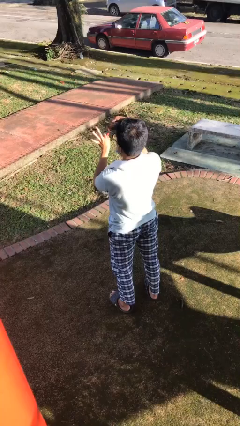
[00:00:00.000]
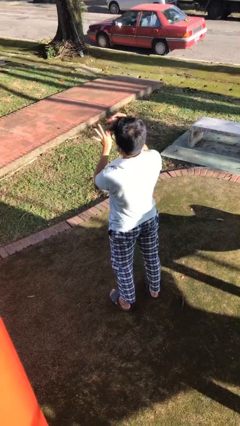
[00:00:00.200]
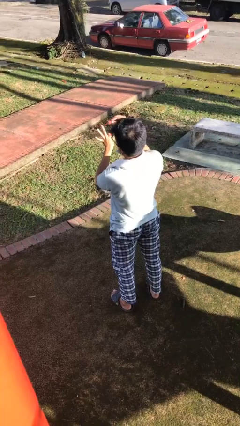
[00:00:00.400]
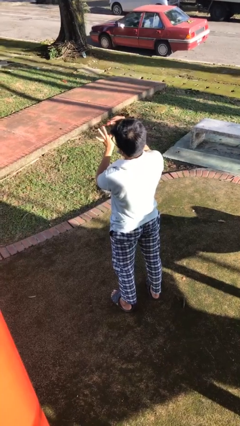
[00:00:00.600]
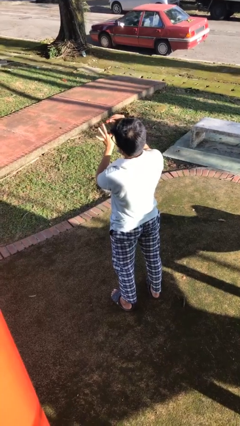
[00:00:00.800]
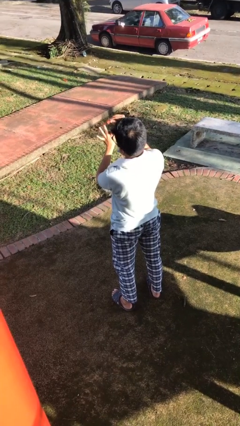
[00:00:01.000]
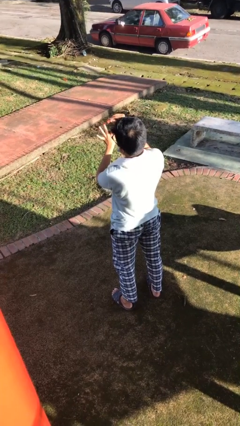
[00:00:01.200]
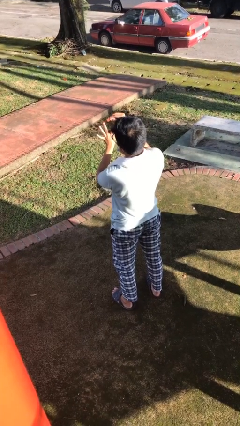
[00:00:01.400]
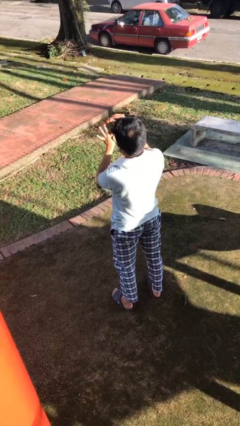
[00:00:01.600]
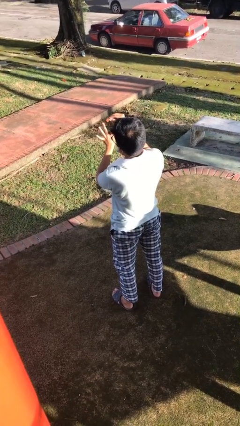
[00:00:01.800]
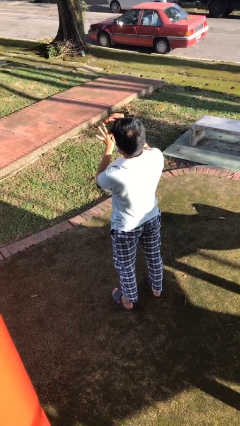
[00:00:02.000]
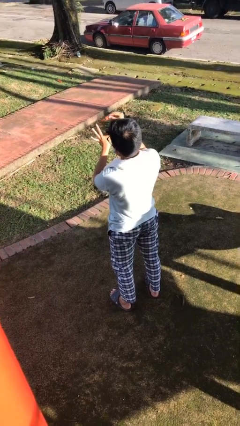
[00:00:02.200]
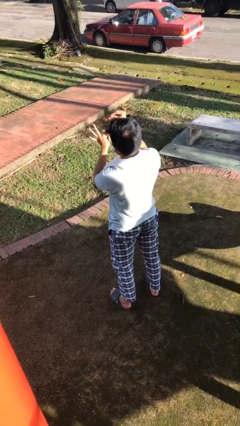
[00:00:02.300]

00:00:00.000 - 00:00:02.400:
person paints fingernails

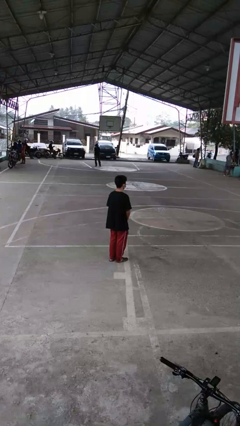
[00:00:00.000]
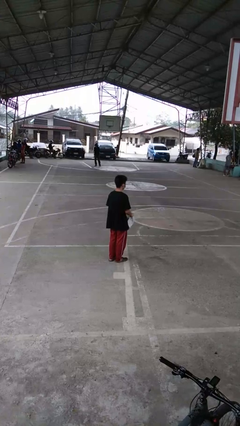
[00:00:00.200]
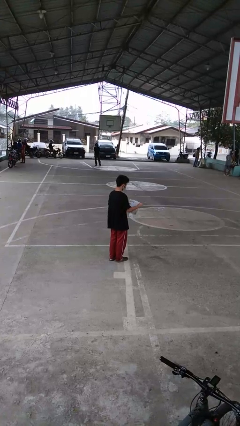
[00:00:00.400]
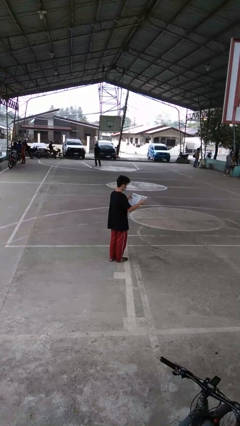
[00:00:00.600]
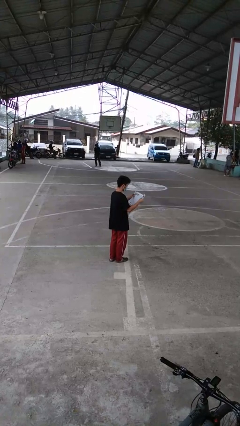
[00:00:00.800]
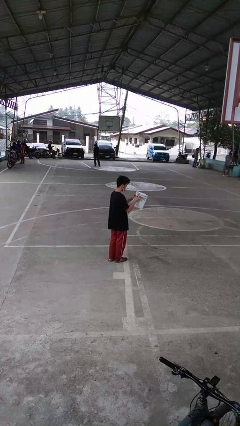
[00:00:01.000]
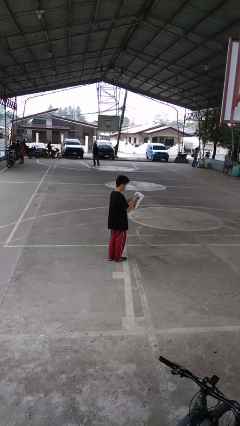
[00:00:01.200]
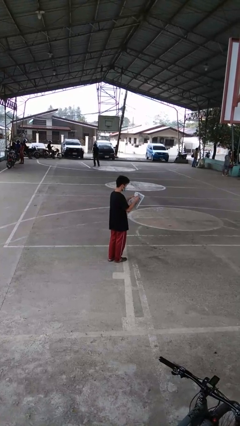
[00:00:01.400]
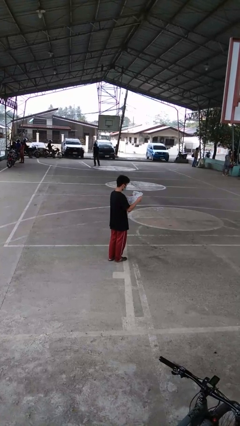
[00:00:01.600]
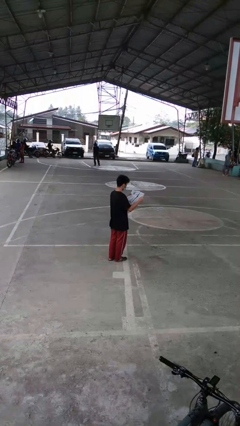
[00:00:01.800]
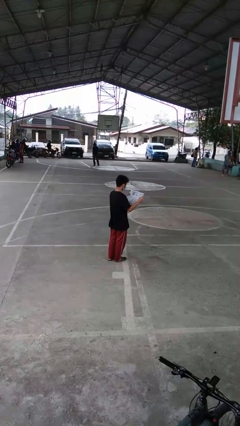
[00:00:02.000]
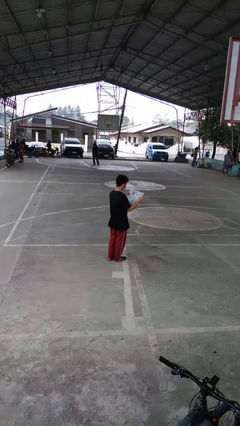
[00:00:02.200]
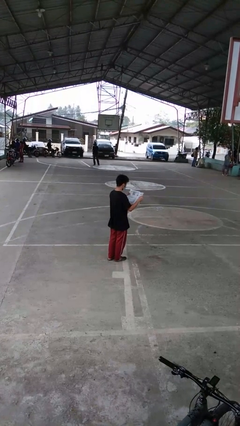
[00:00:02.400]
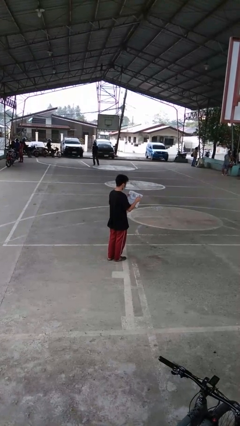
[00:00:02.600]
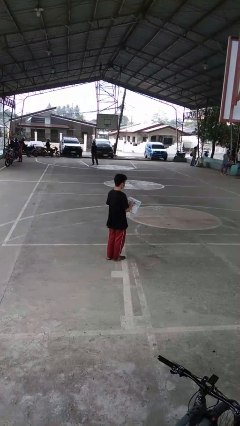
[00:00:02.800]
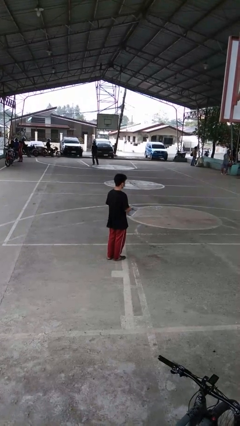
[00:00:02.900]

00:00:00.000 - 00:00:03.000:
person reads newspaper

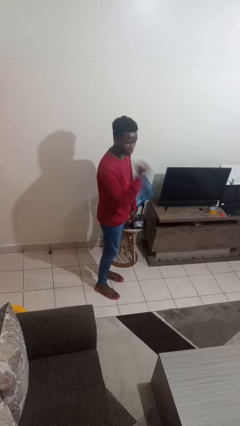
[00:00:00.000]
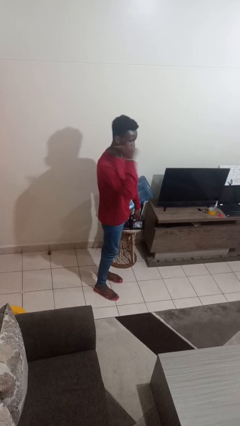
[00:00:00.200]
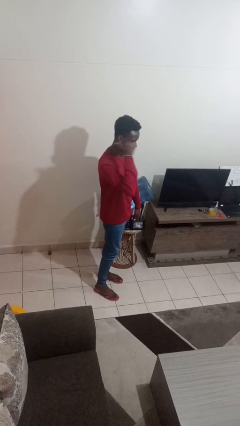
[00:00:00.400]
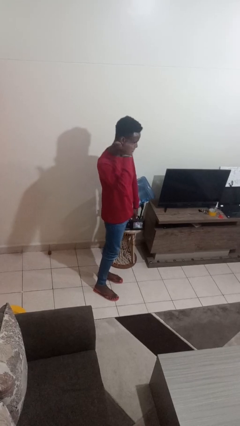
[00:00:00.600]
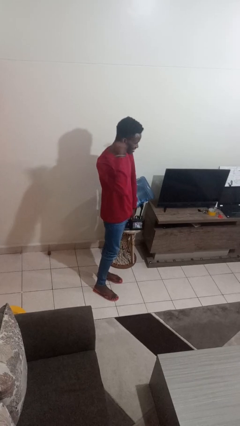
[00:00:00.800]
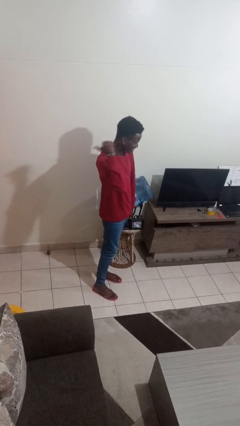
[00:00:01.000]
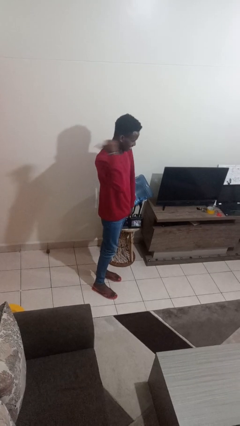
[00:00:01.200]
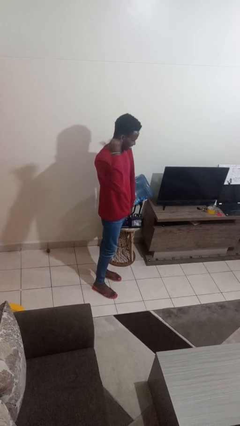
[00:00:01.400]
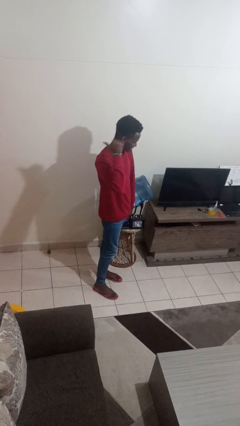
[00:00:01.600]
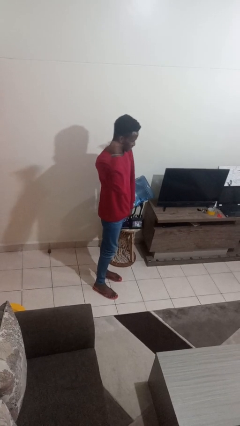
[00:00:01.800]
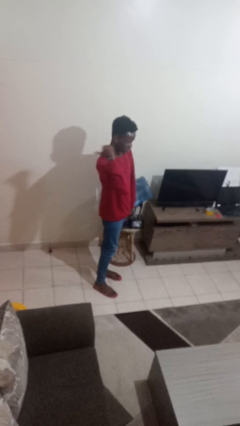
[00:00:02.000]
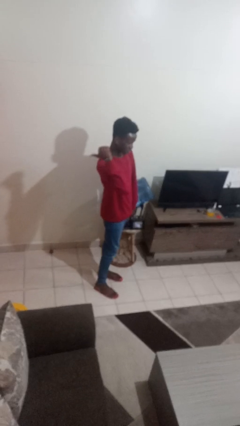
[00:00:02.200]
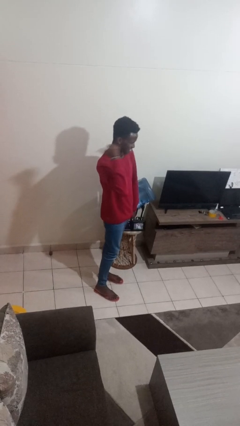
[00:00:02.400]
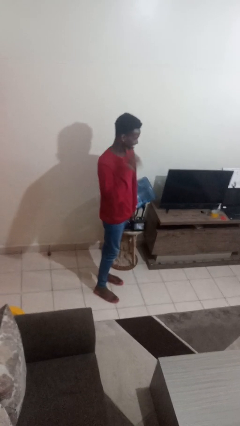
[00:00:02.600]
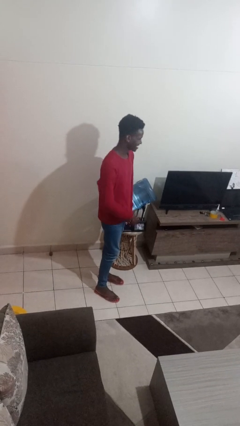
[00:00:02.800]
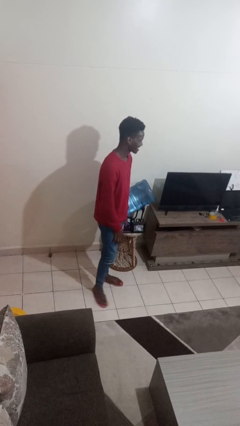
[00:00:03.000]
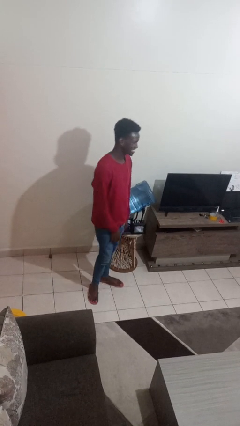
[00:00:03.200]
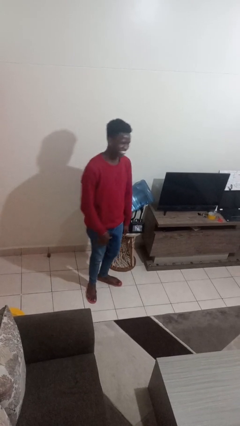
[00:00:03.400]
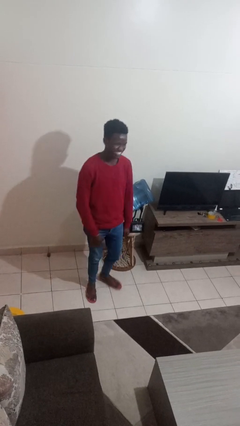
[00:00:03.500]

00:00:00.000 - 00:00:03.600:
person gestures behind me

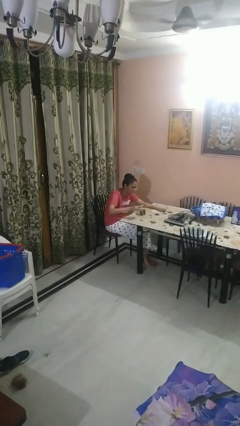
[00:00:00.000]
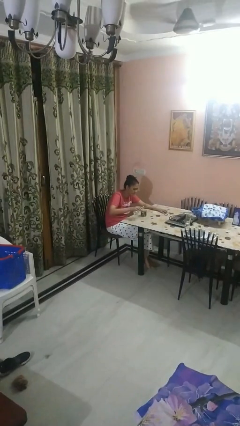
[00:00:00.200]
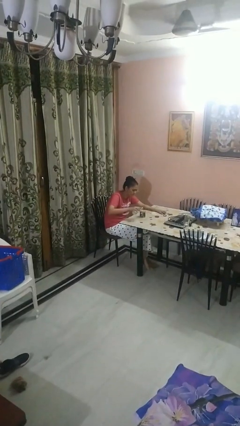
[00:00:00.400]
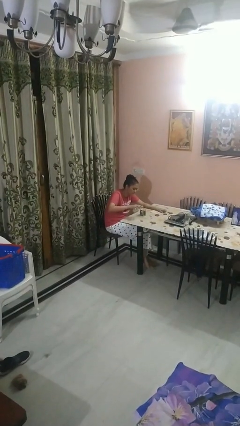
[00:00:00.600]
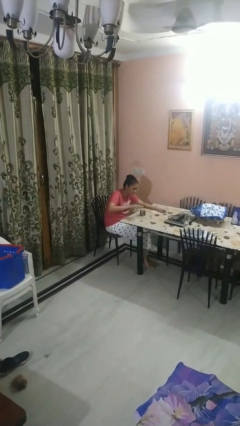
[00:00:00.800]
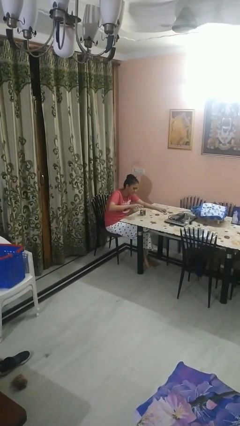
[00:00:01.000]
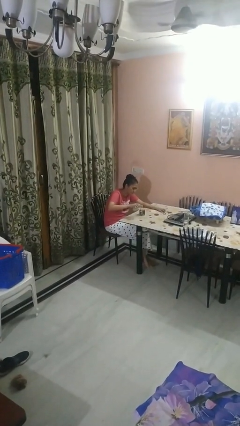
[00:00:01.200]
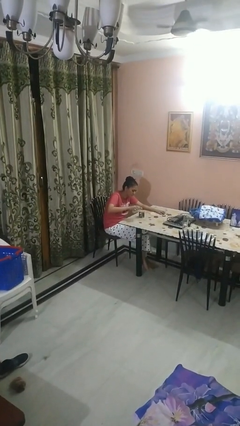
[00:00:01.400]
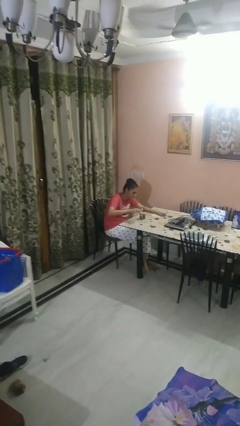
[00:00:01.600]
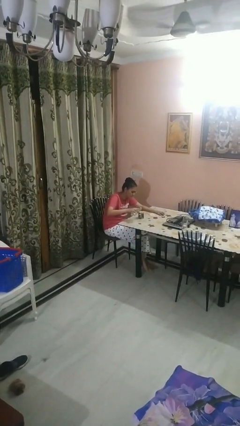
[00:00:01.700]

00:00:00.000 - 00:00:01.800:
person pours liquid into cup

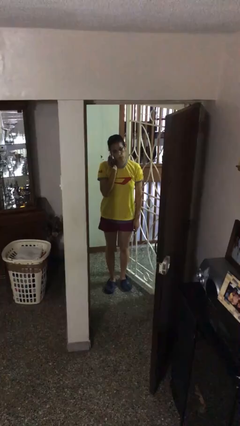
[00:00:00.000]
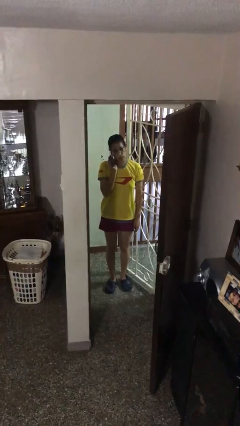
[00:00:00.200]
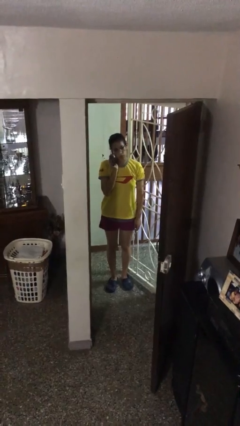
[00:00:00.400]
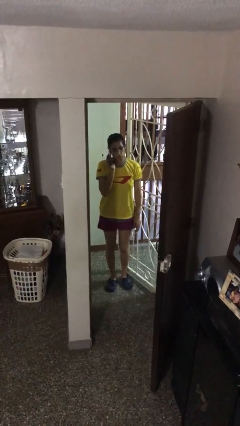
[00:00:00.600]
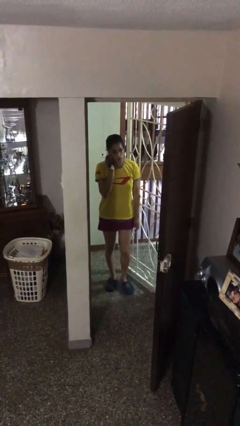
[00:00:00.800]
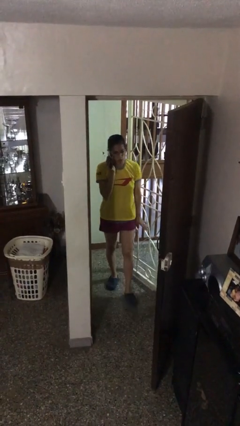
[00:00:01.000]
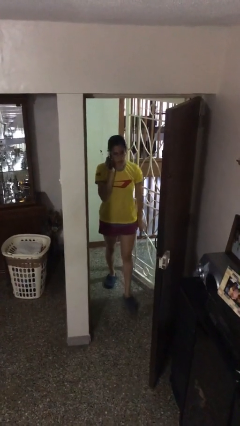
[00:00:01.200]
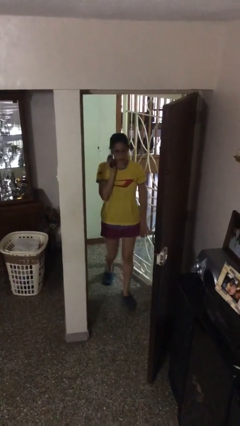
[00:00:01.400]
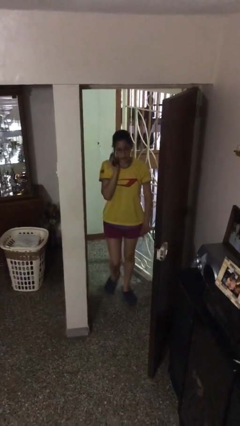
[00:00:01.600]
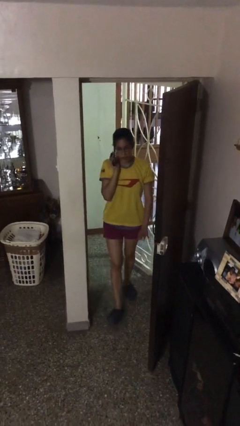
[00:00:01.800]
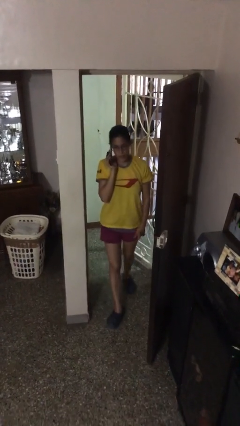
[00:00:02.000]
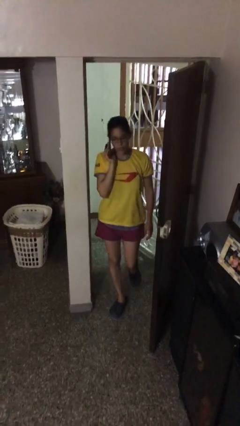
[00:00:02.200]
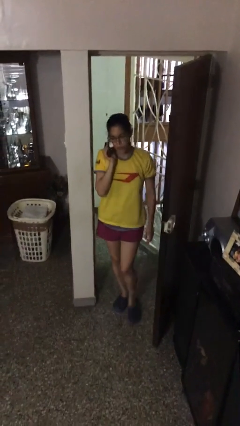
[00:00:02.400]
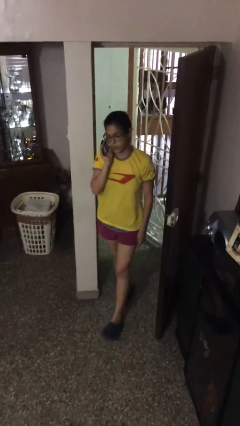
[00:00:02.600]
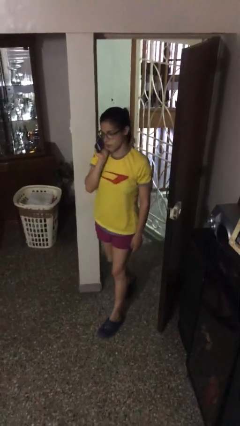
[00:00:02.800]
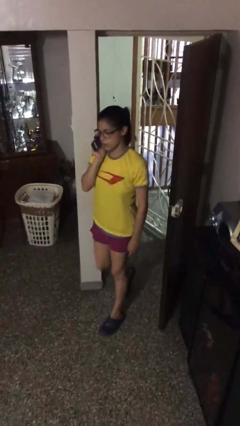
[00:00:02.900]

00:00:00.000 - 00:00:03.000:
person enters scene through structure

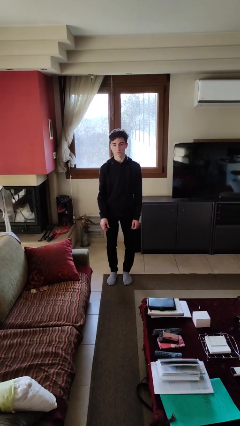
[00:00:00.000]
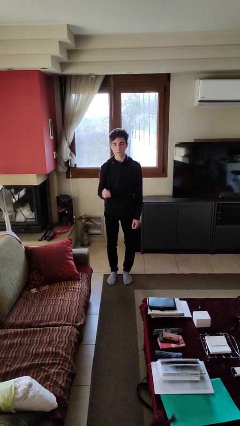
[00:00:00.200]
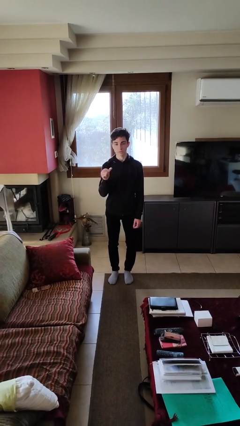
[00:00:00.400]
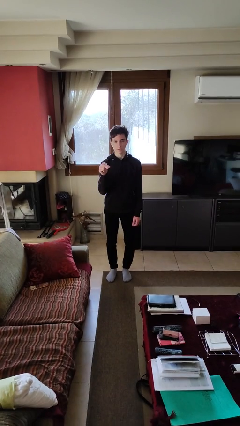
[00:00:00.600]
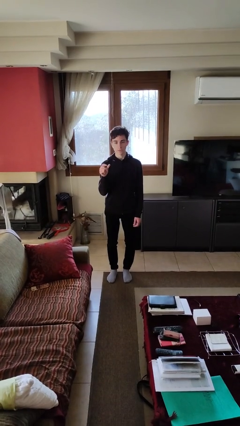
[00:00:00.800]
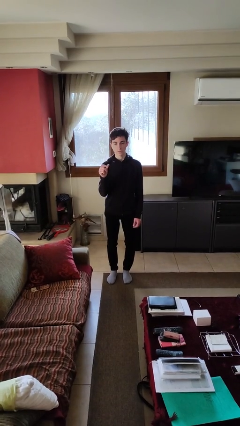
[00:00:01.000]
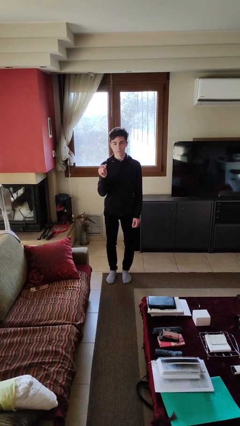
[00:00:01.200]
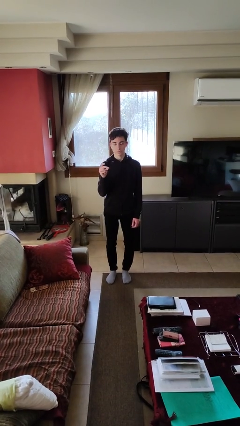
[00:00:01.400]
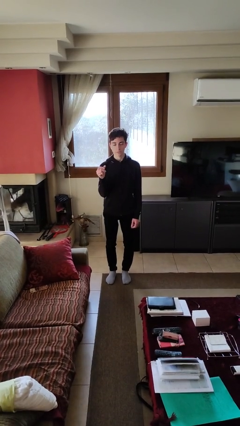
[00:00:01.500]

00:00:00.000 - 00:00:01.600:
person snaps fingers

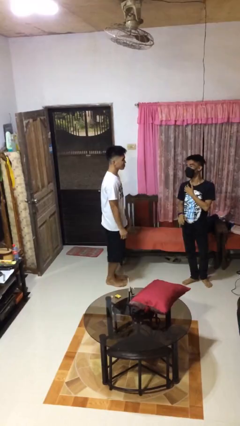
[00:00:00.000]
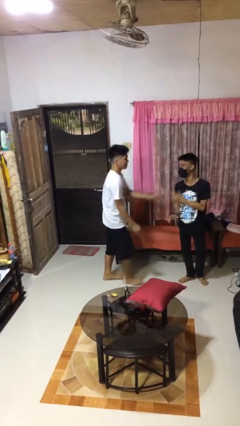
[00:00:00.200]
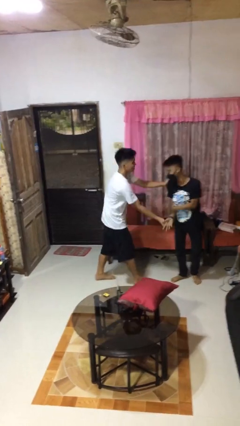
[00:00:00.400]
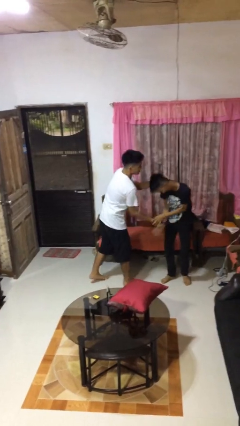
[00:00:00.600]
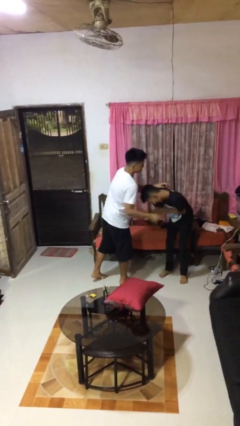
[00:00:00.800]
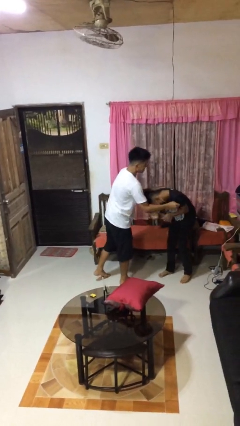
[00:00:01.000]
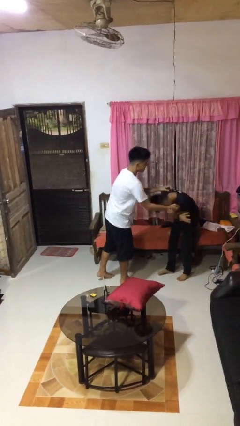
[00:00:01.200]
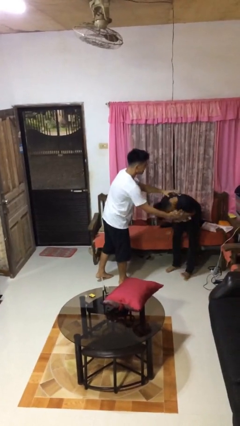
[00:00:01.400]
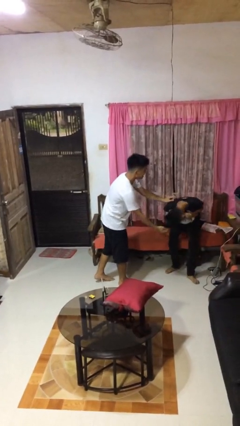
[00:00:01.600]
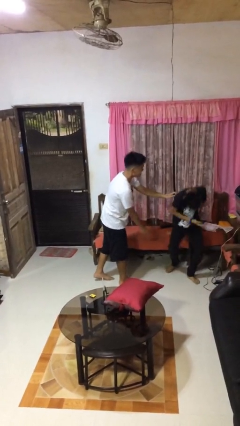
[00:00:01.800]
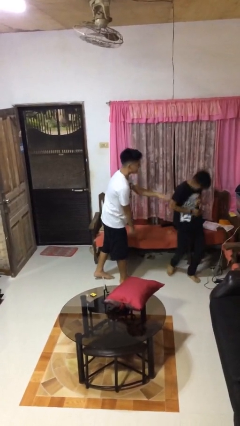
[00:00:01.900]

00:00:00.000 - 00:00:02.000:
person tickles person
